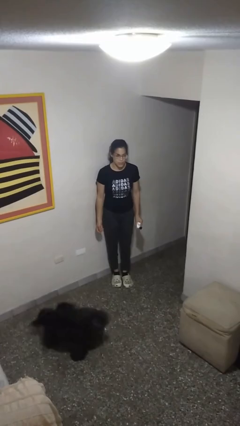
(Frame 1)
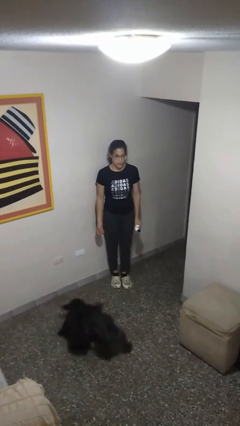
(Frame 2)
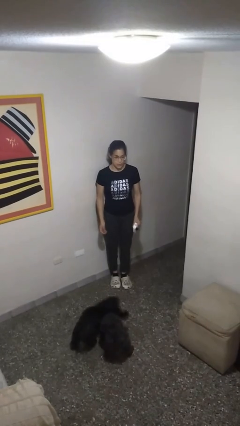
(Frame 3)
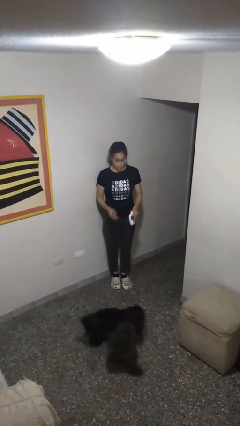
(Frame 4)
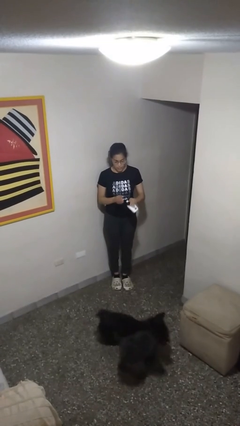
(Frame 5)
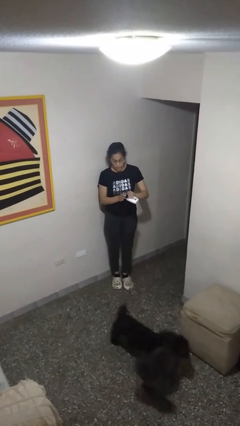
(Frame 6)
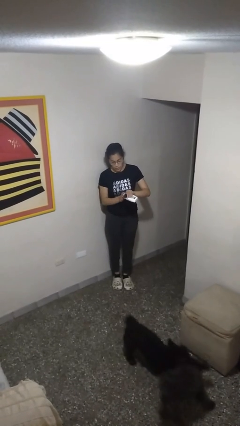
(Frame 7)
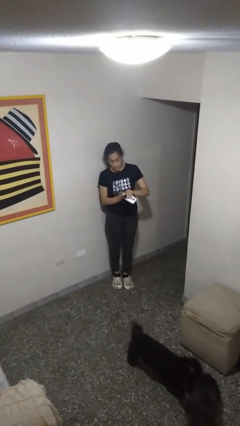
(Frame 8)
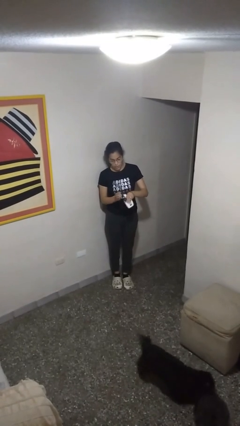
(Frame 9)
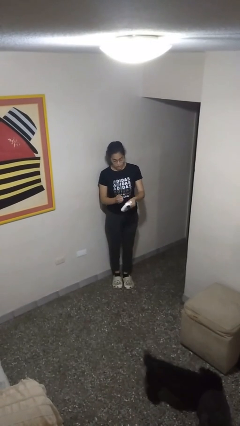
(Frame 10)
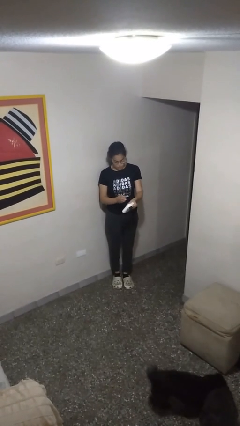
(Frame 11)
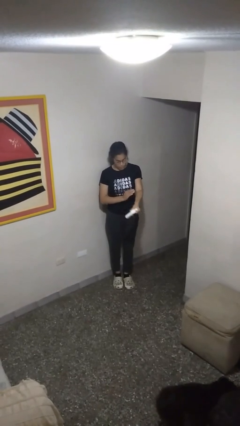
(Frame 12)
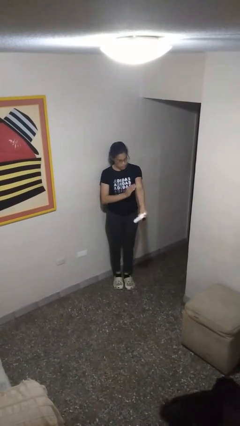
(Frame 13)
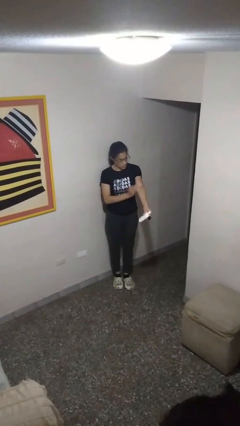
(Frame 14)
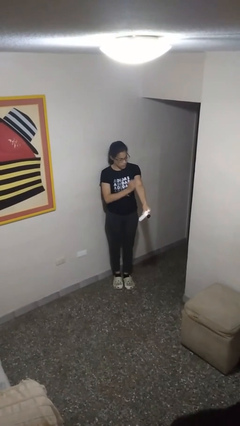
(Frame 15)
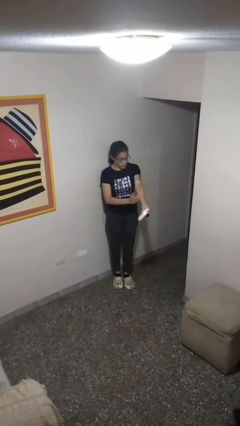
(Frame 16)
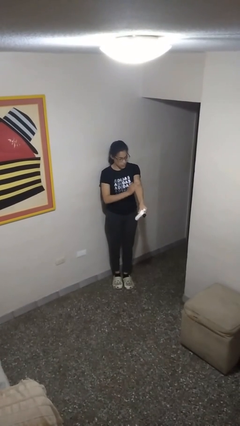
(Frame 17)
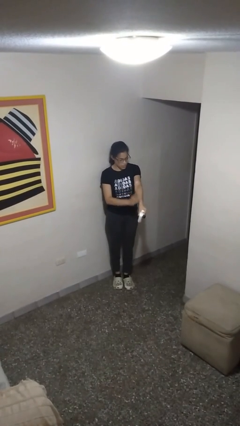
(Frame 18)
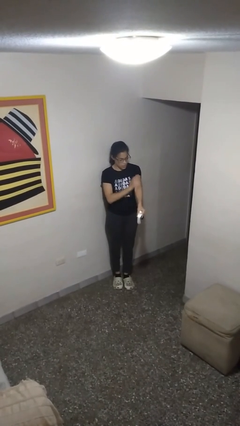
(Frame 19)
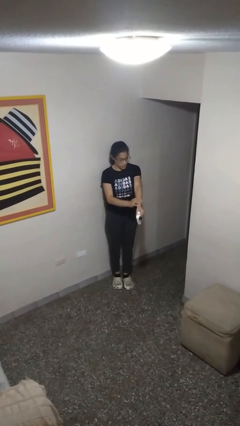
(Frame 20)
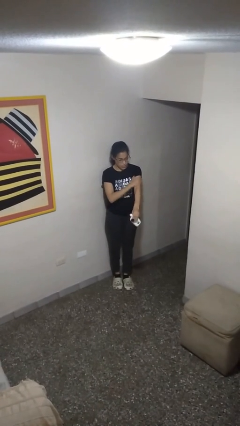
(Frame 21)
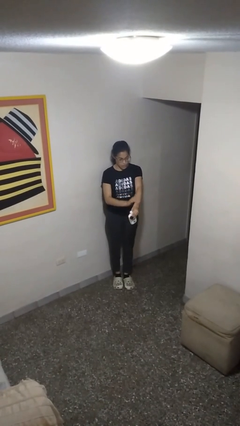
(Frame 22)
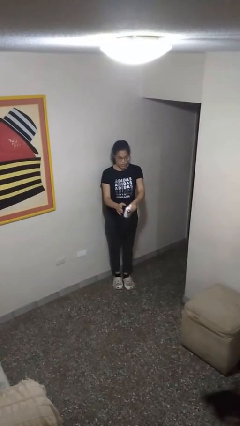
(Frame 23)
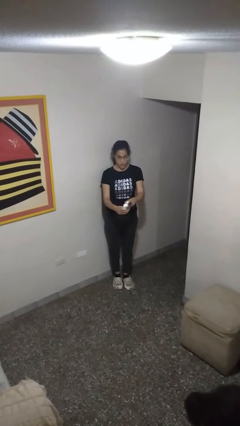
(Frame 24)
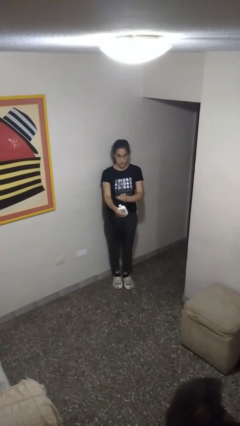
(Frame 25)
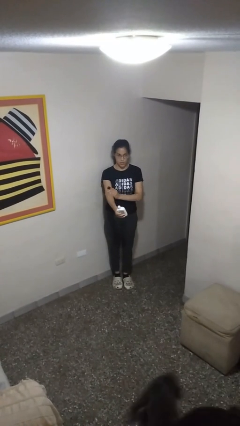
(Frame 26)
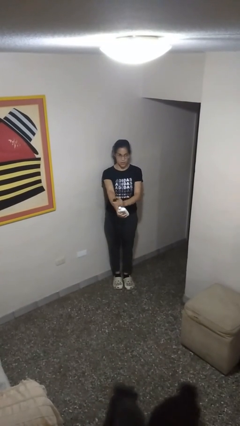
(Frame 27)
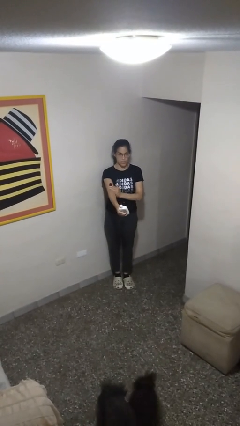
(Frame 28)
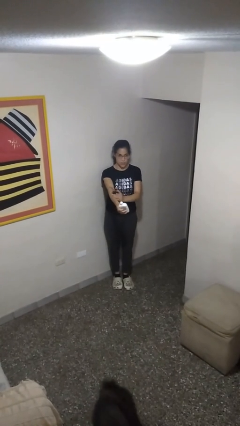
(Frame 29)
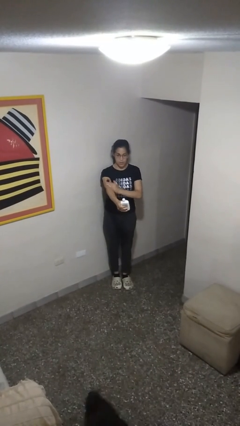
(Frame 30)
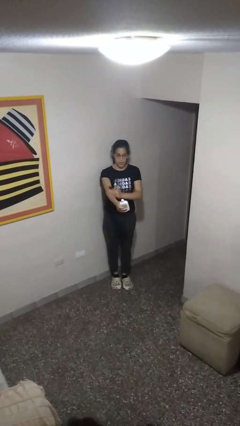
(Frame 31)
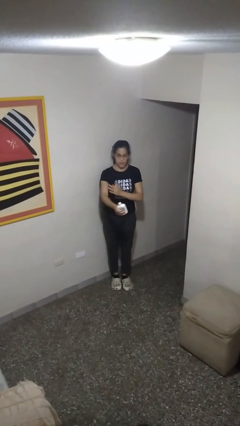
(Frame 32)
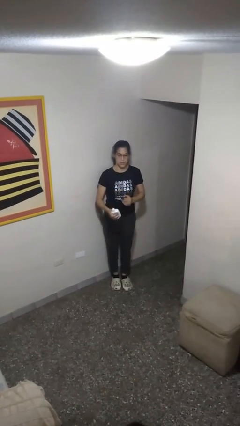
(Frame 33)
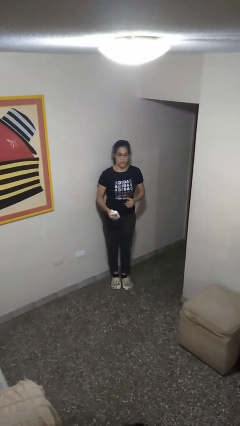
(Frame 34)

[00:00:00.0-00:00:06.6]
person applies sunscreen

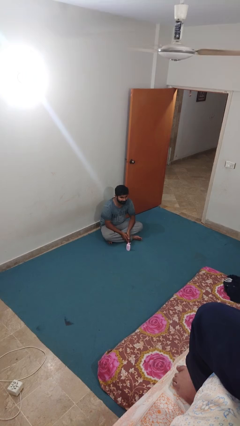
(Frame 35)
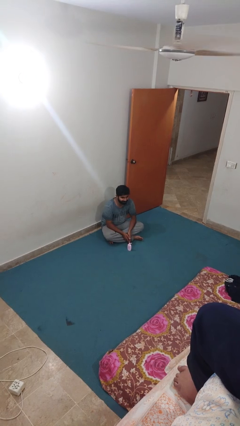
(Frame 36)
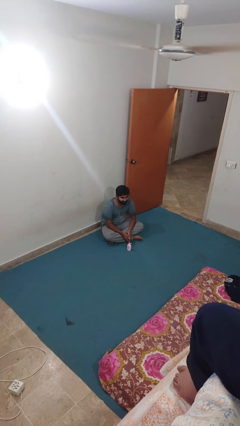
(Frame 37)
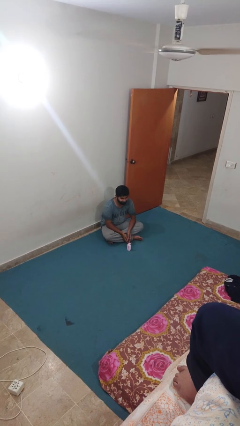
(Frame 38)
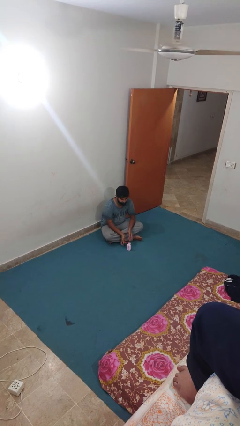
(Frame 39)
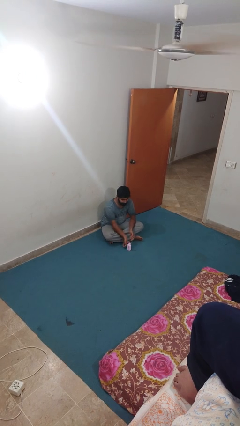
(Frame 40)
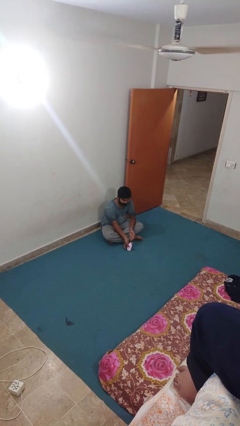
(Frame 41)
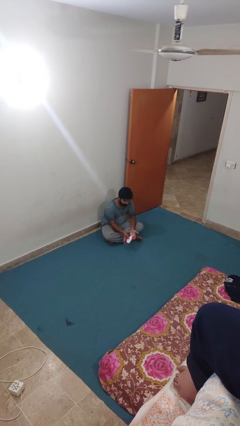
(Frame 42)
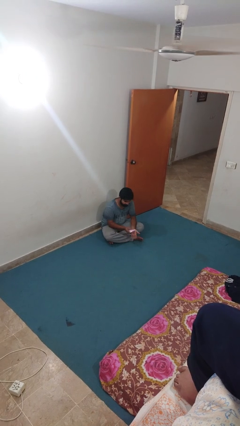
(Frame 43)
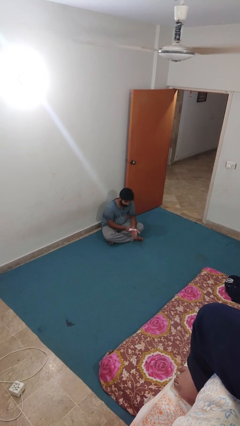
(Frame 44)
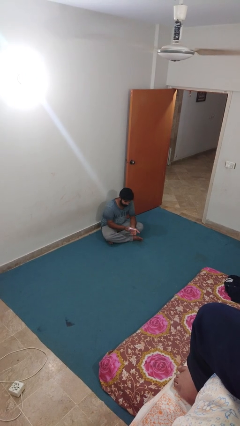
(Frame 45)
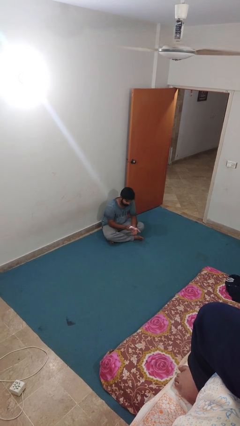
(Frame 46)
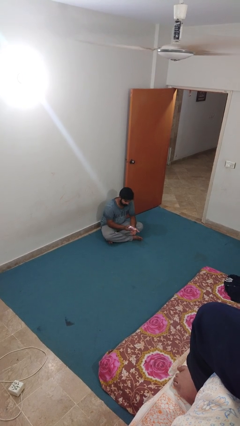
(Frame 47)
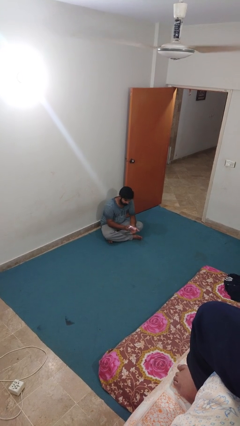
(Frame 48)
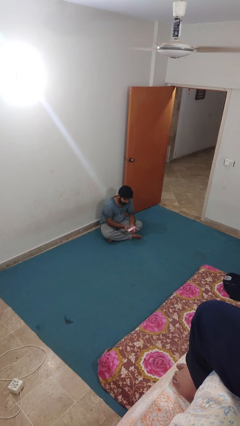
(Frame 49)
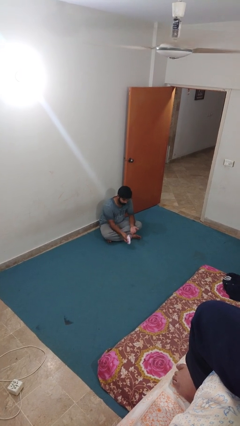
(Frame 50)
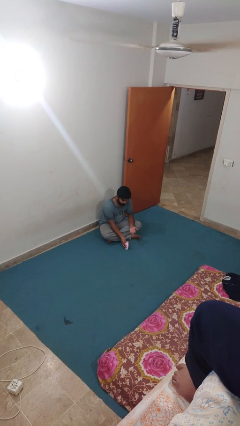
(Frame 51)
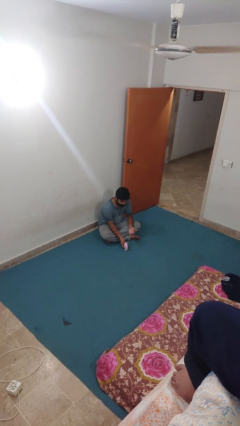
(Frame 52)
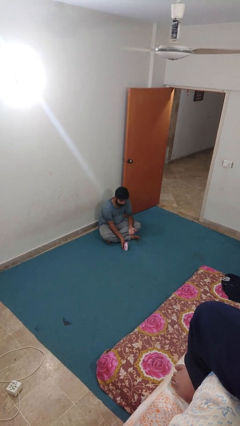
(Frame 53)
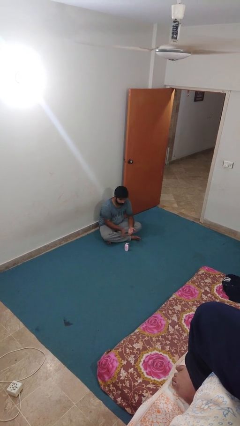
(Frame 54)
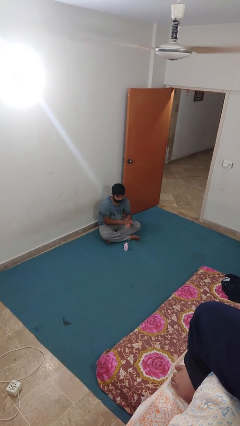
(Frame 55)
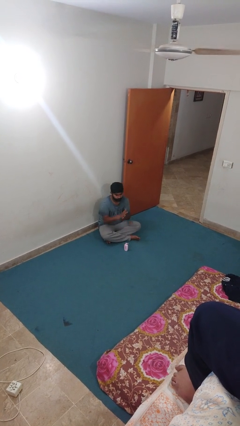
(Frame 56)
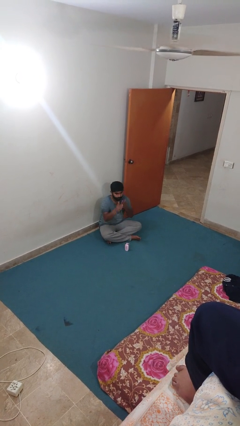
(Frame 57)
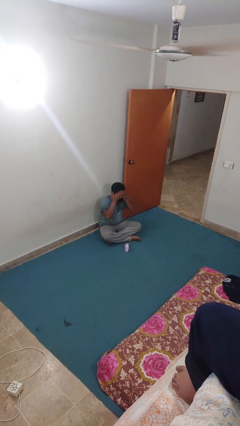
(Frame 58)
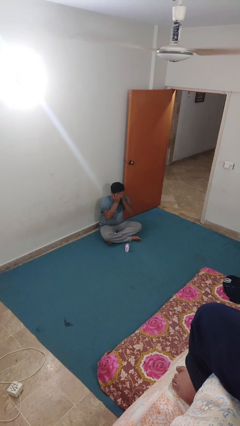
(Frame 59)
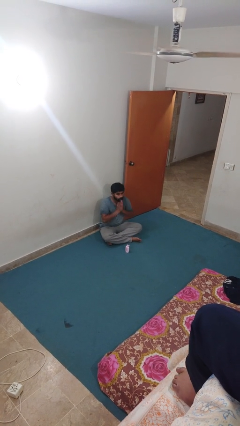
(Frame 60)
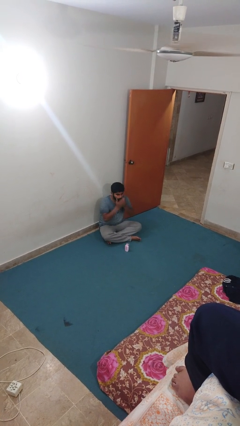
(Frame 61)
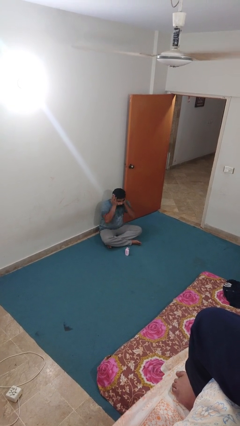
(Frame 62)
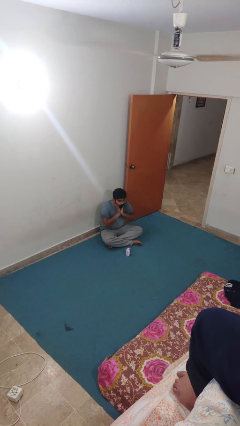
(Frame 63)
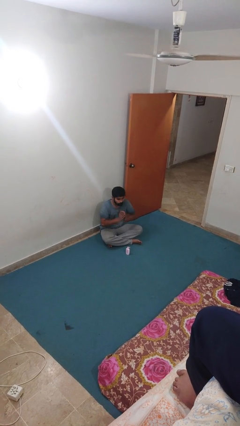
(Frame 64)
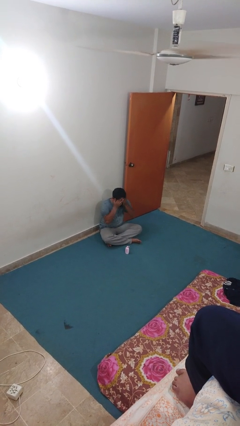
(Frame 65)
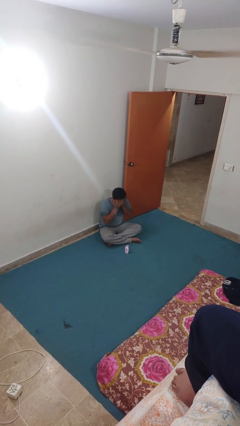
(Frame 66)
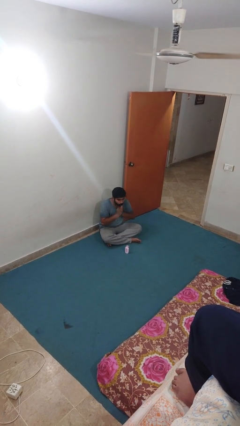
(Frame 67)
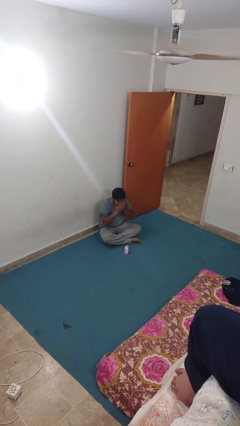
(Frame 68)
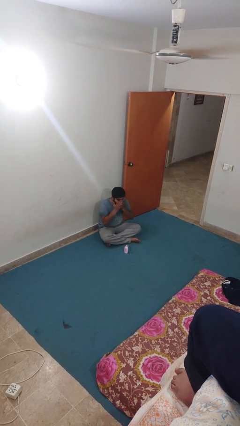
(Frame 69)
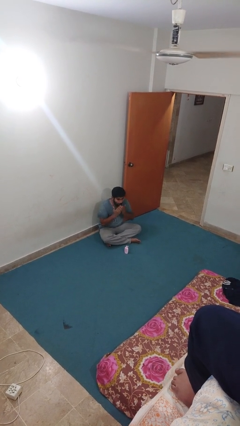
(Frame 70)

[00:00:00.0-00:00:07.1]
person applies facial moisturizer

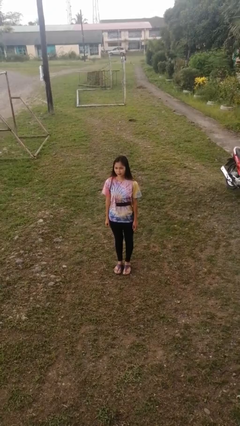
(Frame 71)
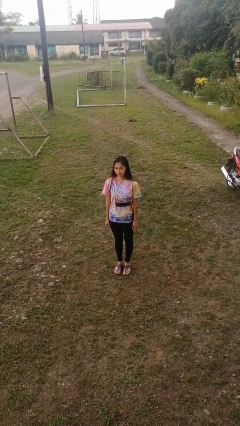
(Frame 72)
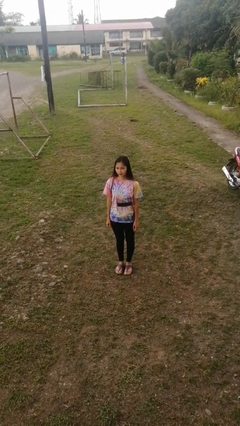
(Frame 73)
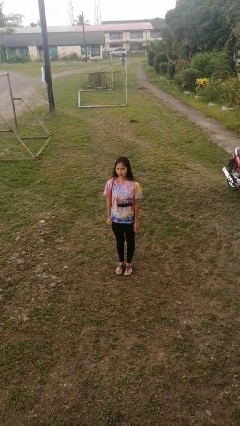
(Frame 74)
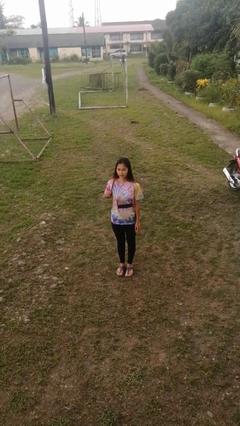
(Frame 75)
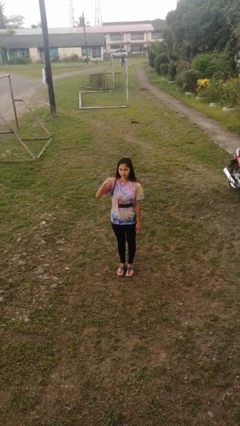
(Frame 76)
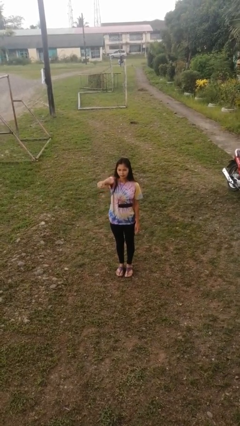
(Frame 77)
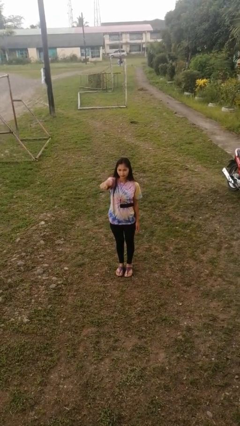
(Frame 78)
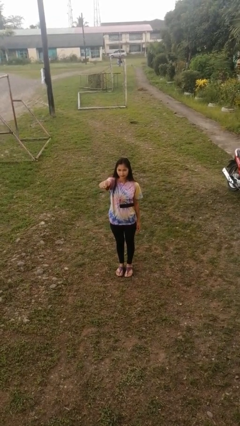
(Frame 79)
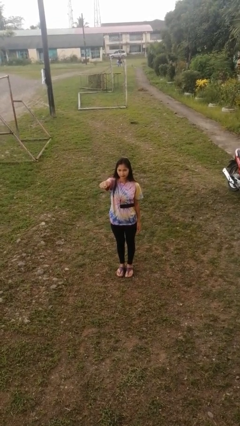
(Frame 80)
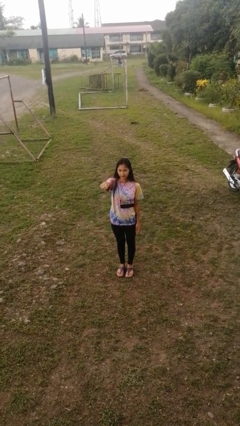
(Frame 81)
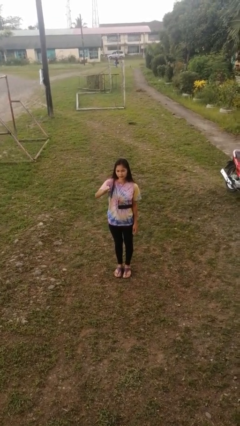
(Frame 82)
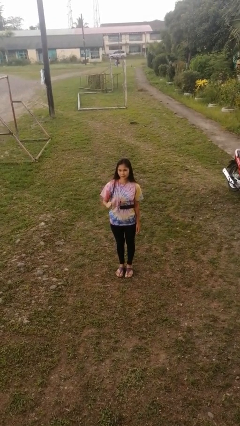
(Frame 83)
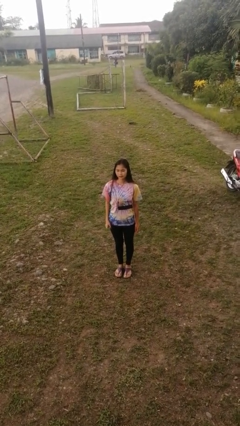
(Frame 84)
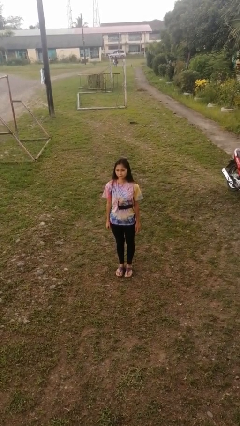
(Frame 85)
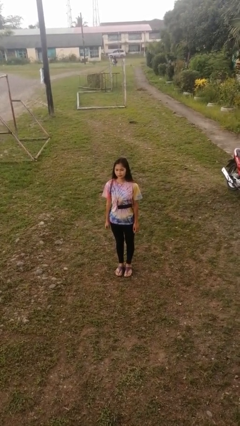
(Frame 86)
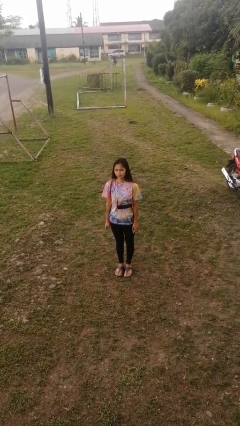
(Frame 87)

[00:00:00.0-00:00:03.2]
person punches

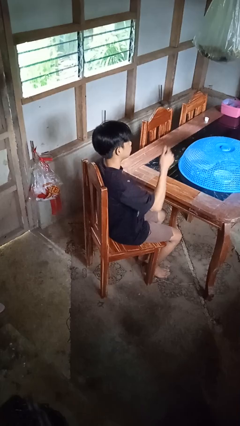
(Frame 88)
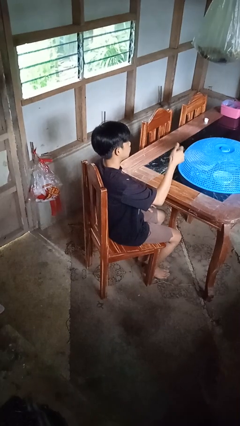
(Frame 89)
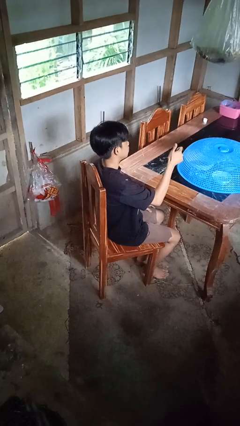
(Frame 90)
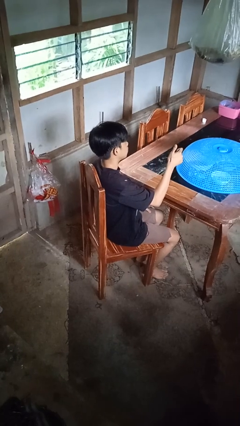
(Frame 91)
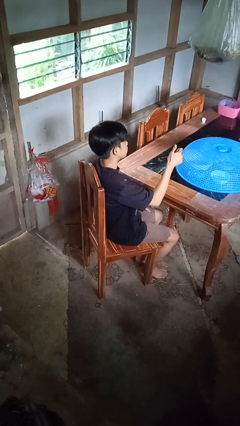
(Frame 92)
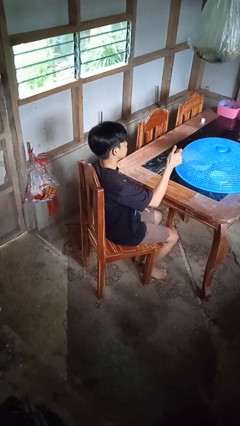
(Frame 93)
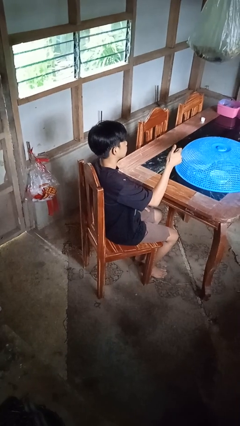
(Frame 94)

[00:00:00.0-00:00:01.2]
person gestures thumbs up

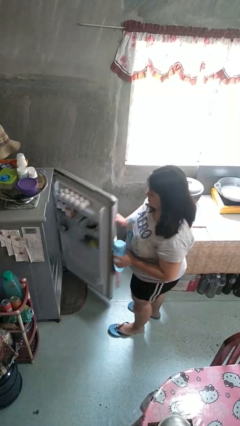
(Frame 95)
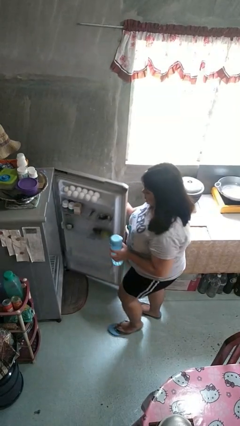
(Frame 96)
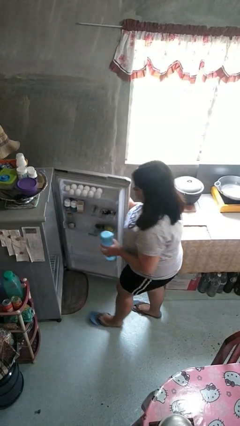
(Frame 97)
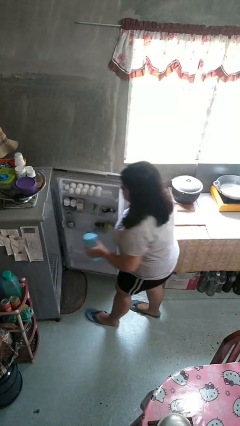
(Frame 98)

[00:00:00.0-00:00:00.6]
person puts object into refrigerator
